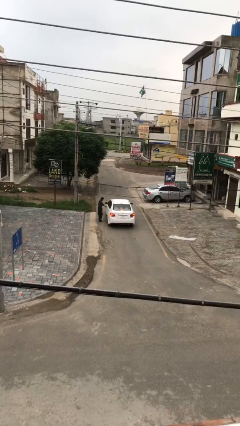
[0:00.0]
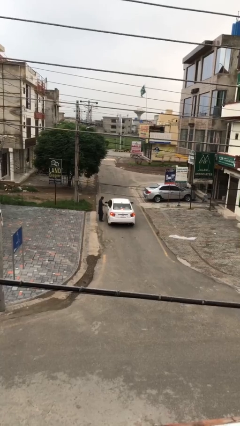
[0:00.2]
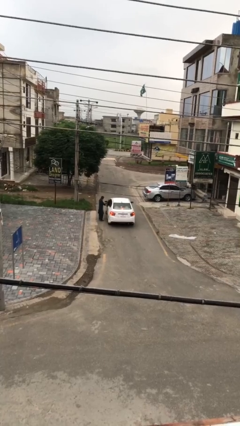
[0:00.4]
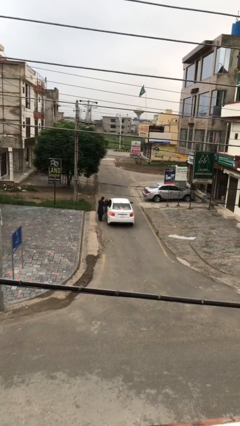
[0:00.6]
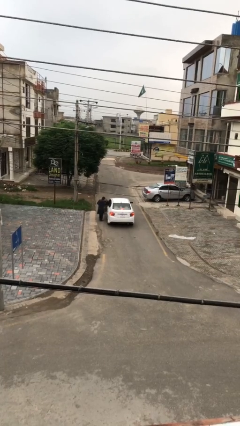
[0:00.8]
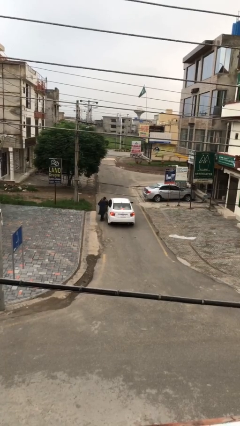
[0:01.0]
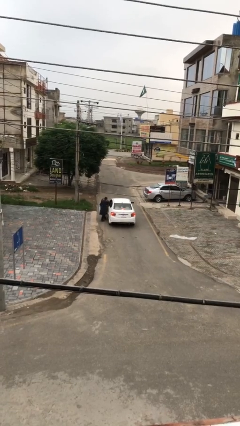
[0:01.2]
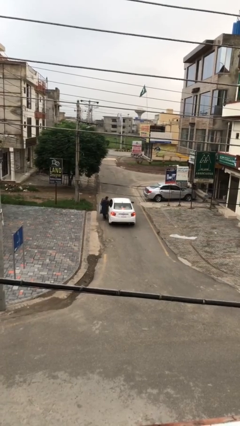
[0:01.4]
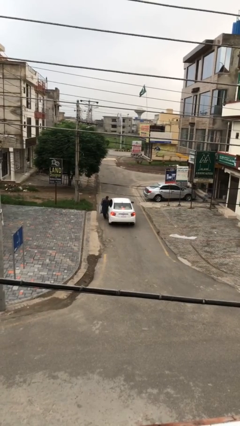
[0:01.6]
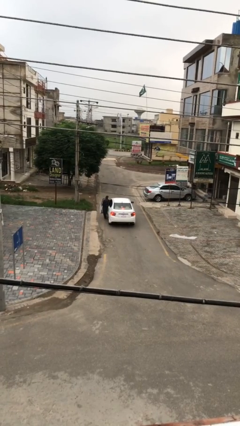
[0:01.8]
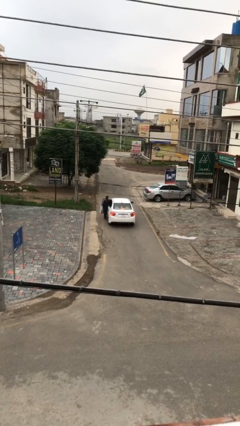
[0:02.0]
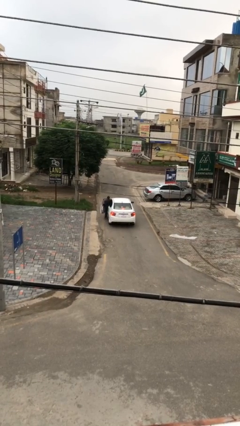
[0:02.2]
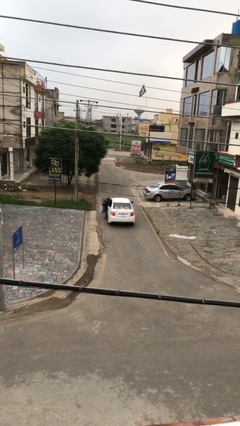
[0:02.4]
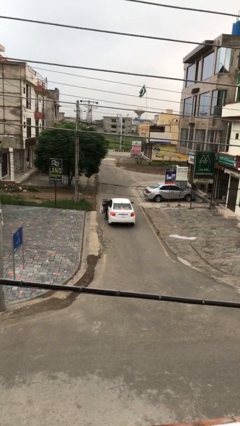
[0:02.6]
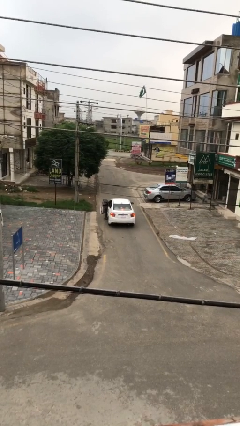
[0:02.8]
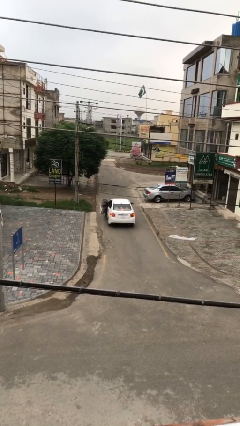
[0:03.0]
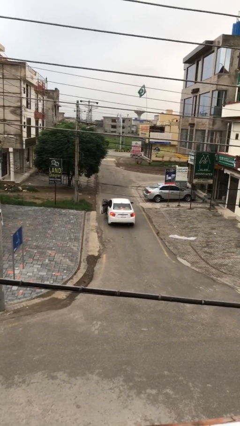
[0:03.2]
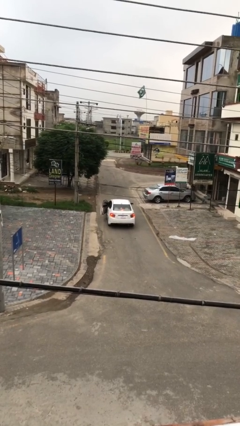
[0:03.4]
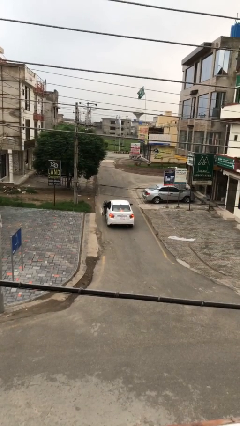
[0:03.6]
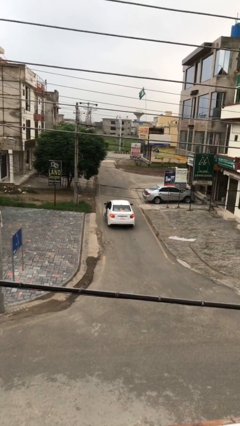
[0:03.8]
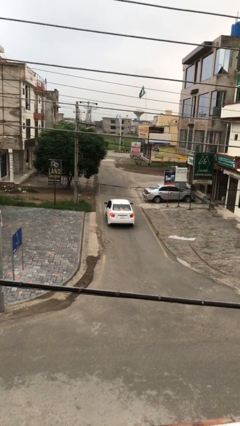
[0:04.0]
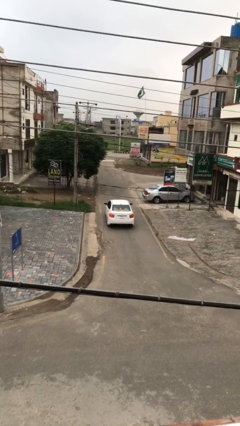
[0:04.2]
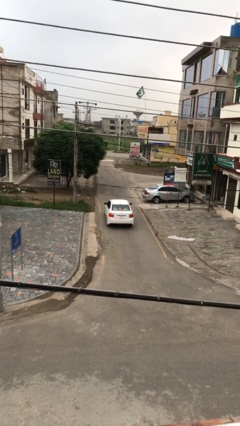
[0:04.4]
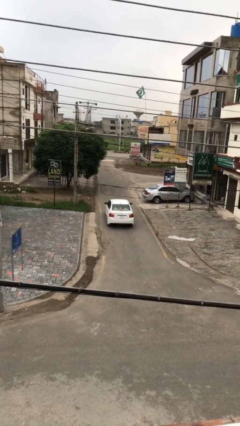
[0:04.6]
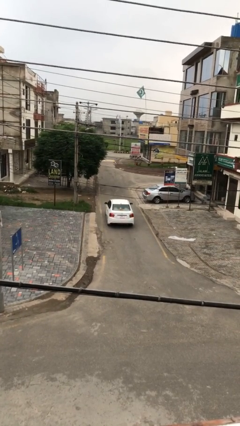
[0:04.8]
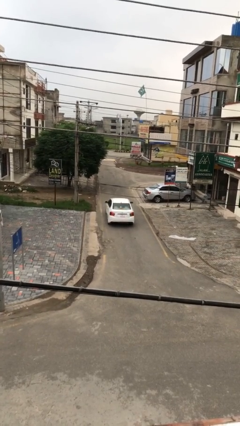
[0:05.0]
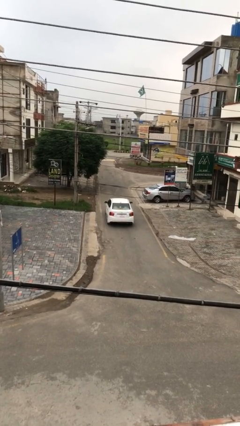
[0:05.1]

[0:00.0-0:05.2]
car picks up person

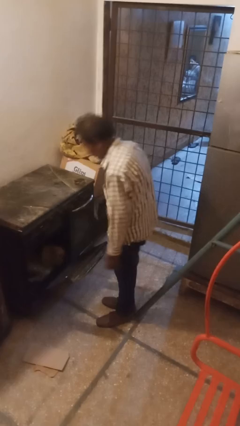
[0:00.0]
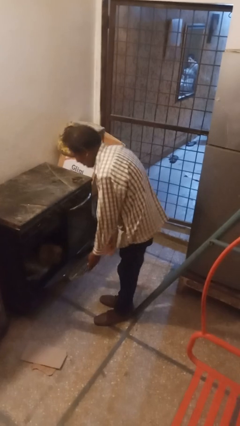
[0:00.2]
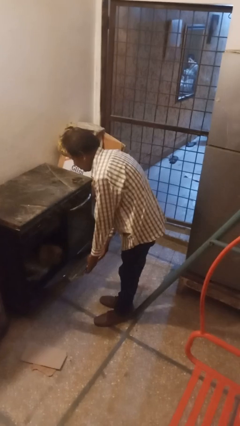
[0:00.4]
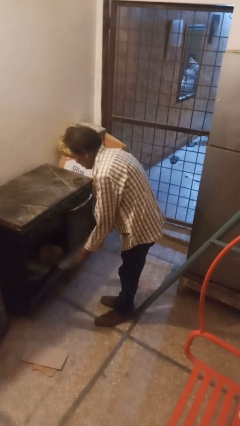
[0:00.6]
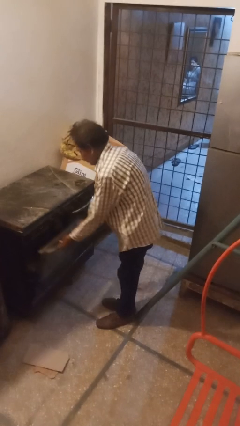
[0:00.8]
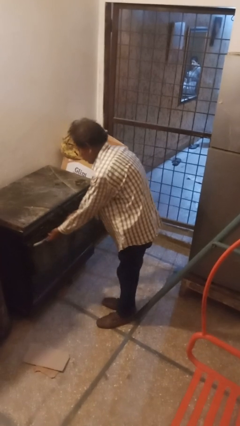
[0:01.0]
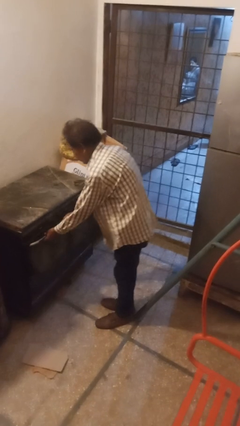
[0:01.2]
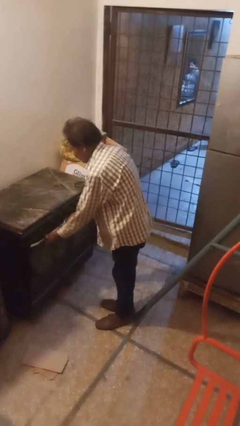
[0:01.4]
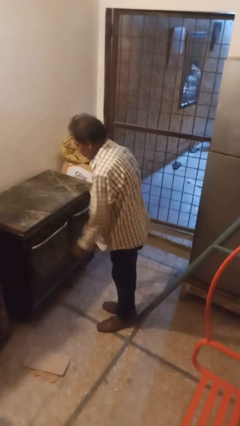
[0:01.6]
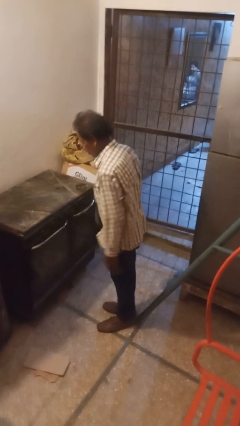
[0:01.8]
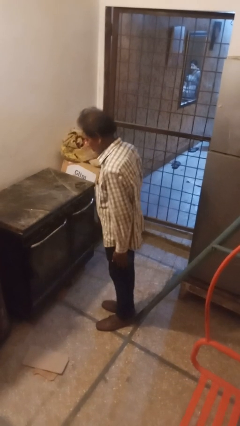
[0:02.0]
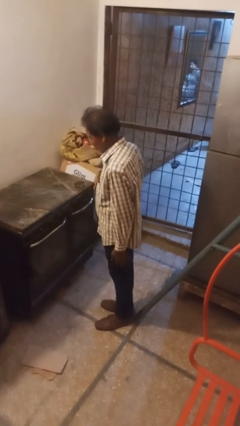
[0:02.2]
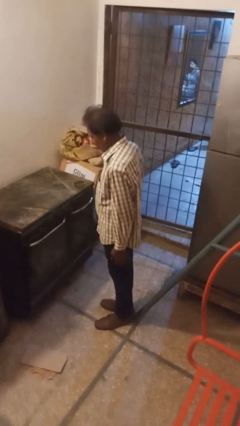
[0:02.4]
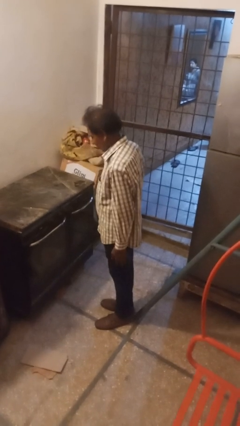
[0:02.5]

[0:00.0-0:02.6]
person closes oven door

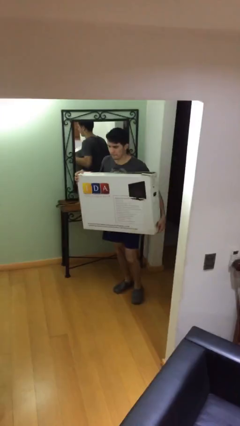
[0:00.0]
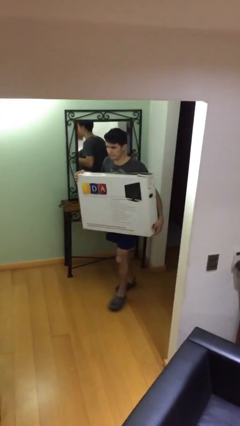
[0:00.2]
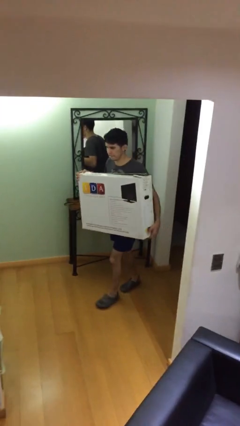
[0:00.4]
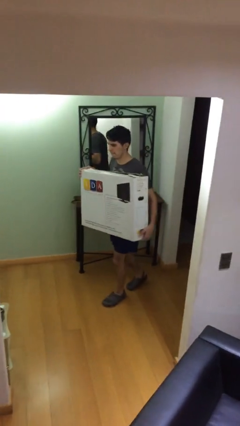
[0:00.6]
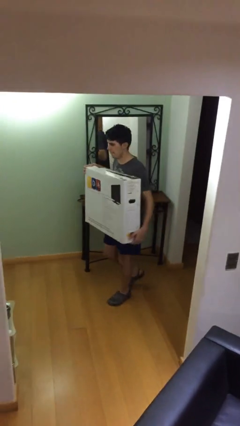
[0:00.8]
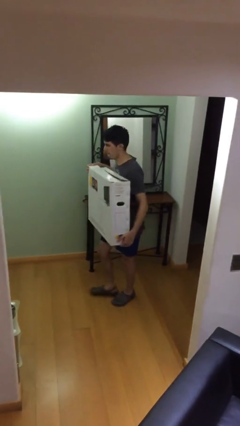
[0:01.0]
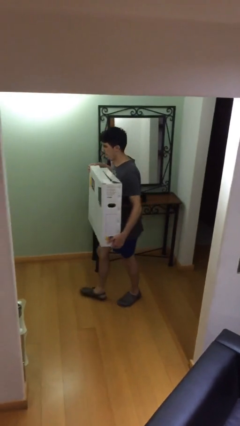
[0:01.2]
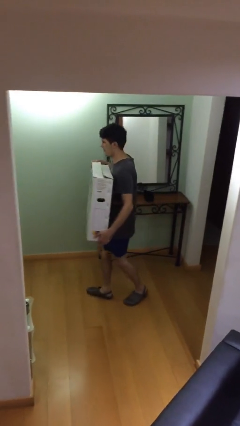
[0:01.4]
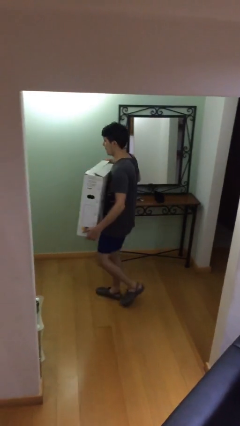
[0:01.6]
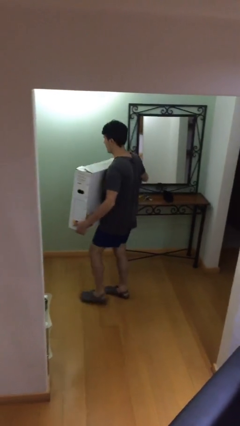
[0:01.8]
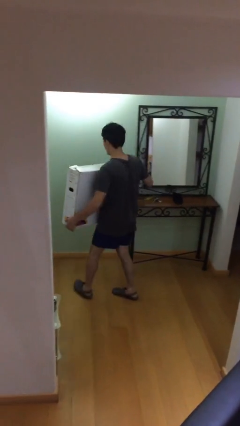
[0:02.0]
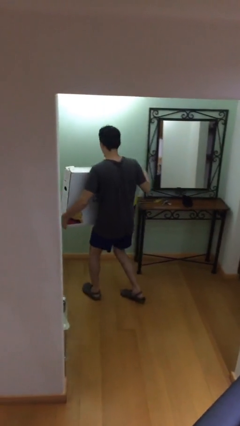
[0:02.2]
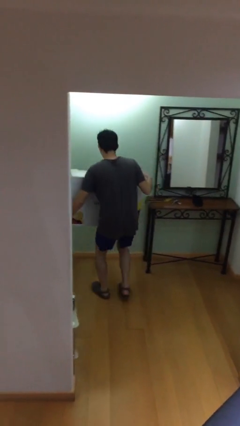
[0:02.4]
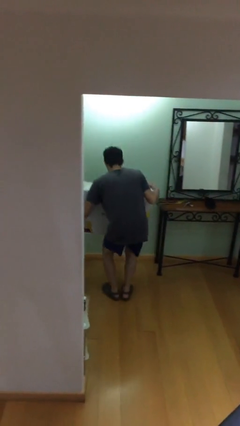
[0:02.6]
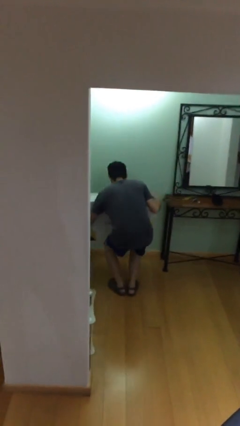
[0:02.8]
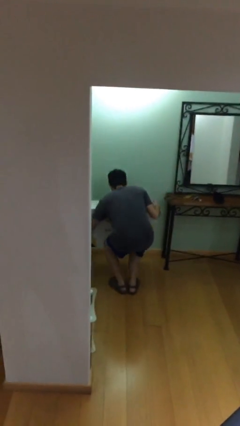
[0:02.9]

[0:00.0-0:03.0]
person carries heavy object

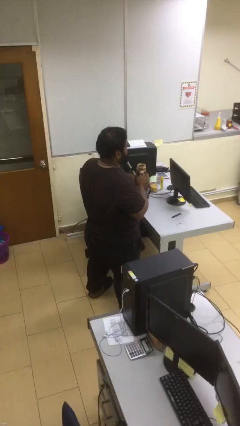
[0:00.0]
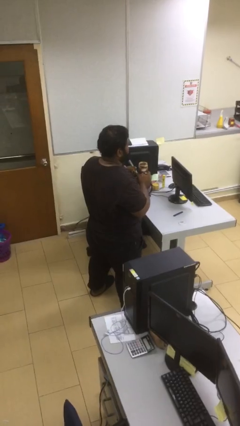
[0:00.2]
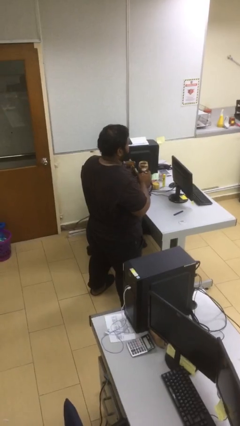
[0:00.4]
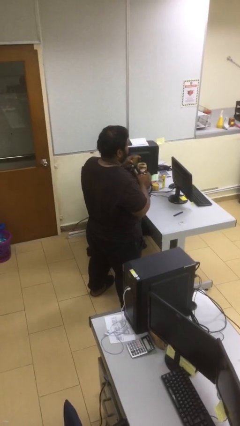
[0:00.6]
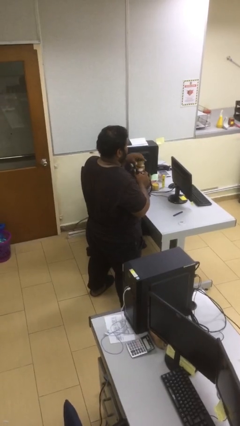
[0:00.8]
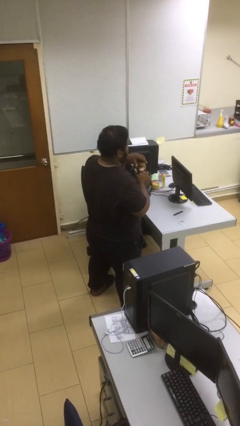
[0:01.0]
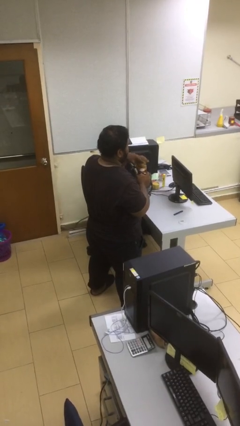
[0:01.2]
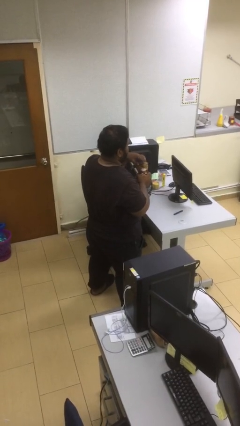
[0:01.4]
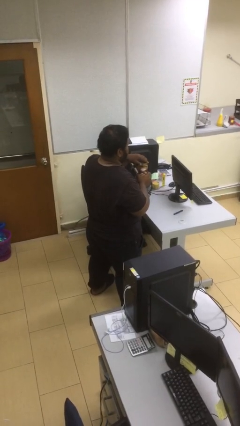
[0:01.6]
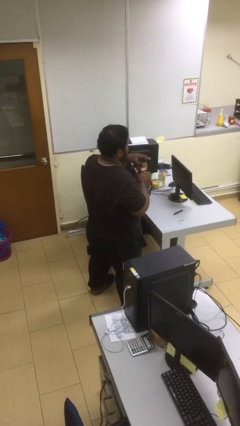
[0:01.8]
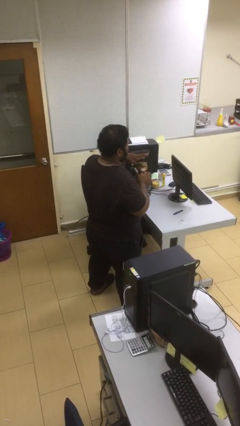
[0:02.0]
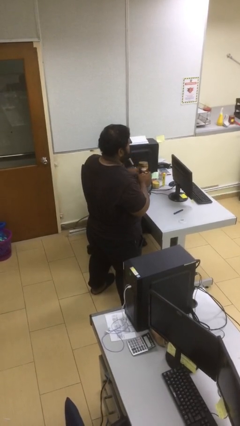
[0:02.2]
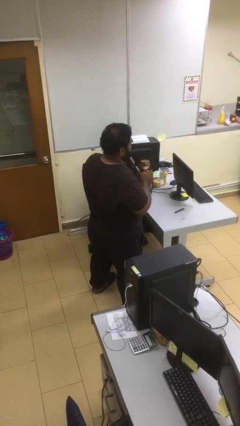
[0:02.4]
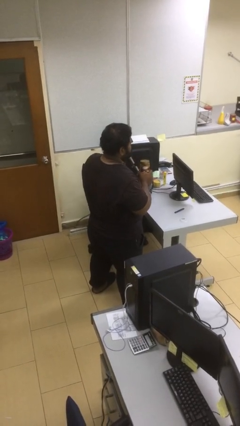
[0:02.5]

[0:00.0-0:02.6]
person closes jar

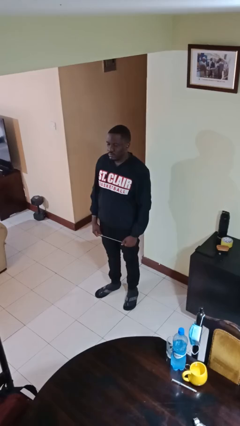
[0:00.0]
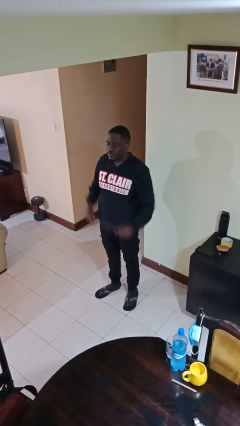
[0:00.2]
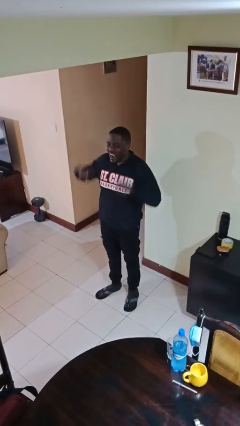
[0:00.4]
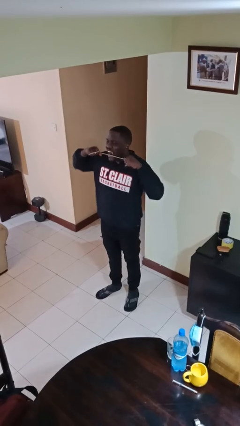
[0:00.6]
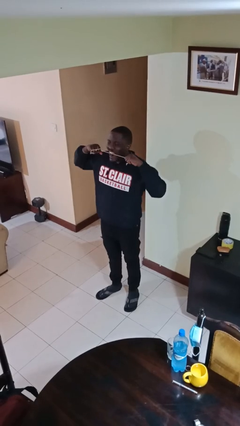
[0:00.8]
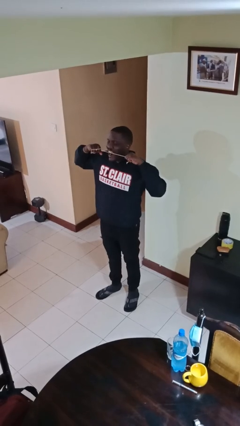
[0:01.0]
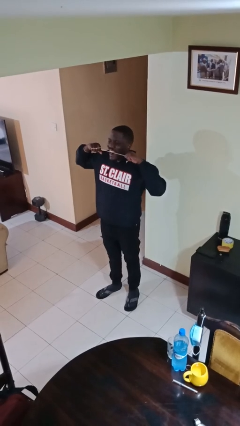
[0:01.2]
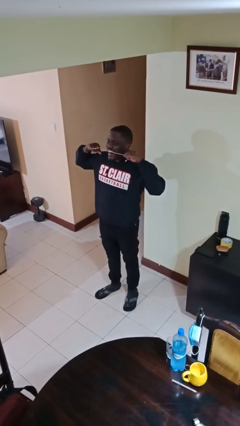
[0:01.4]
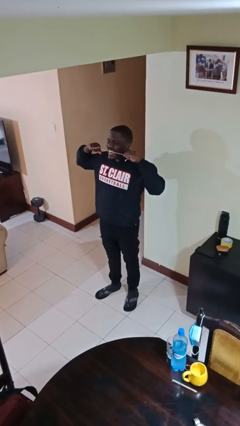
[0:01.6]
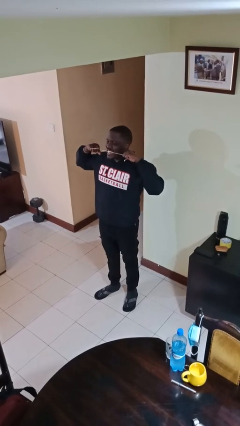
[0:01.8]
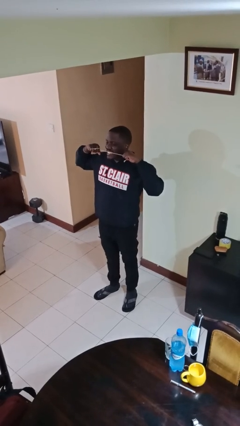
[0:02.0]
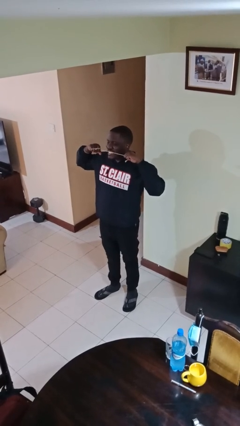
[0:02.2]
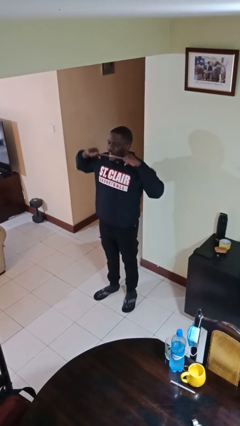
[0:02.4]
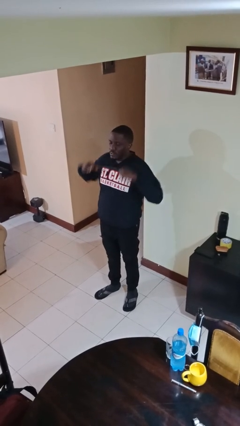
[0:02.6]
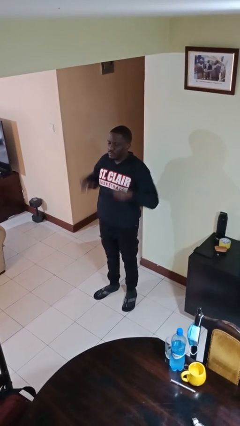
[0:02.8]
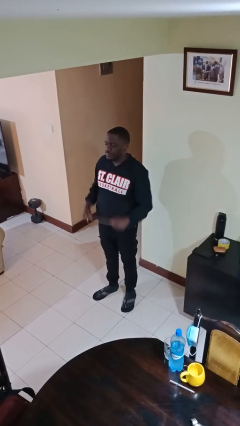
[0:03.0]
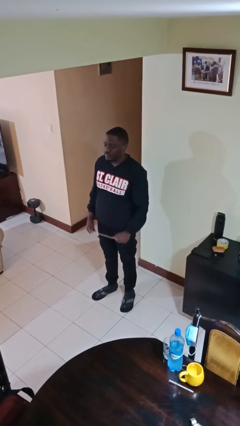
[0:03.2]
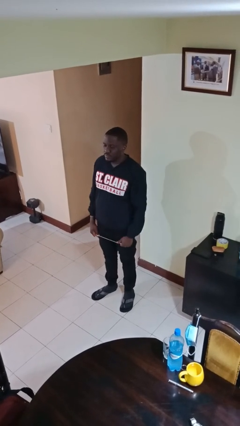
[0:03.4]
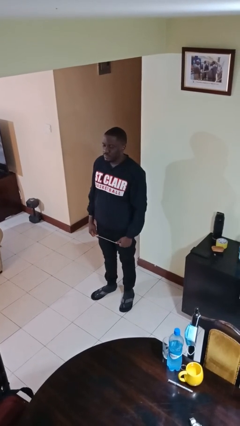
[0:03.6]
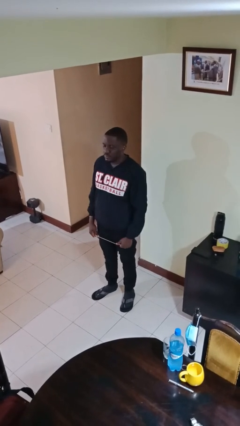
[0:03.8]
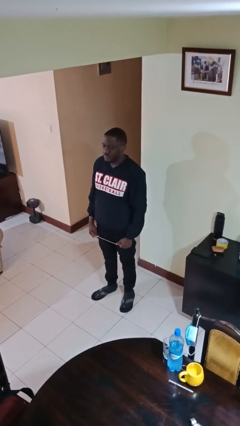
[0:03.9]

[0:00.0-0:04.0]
person flosses
